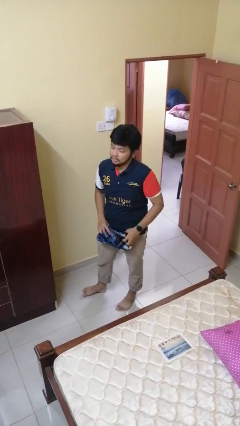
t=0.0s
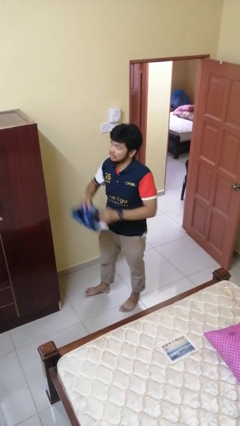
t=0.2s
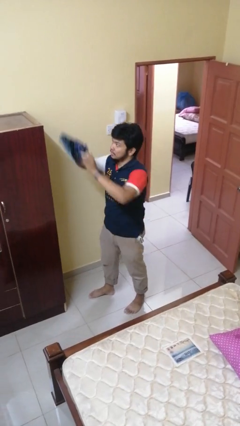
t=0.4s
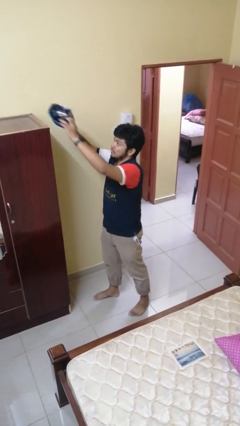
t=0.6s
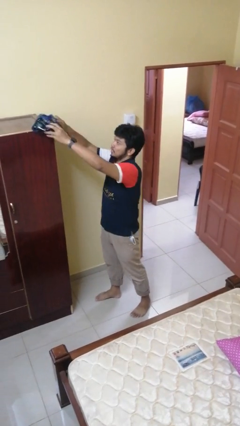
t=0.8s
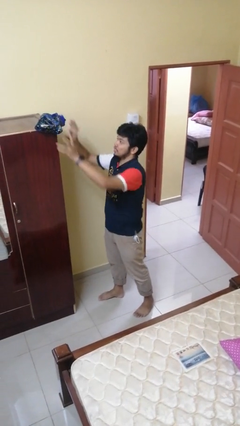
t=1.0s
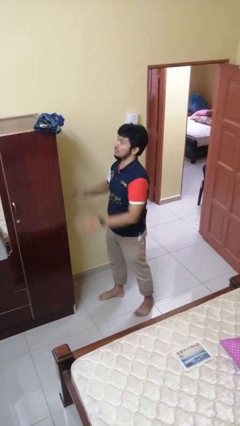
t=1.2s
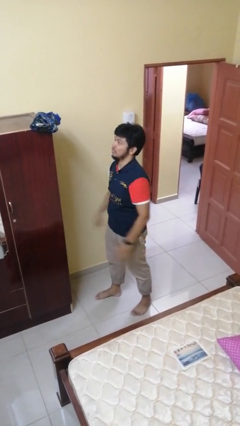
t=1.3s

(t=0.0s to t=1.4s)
person puts down object on countertop

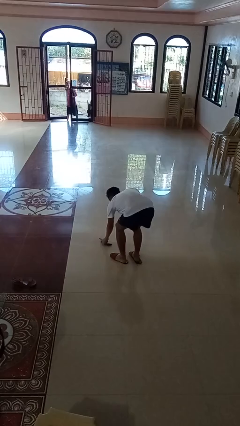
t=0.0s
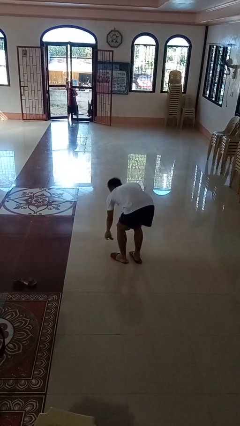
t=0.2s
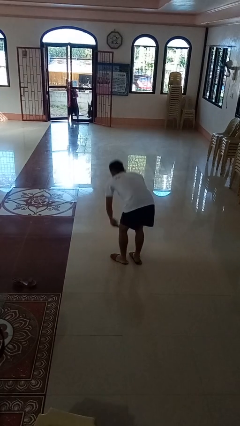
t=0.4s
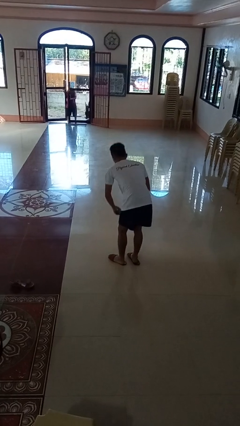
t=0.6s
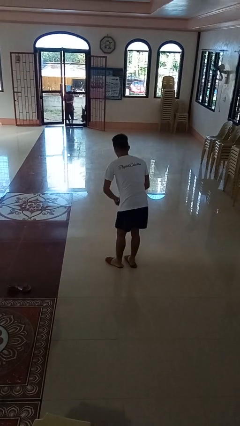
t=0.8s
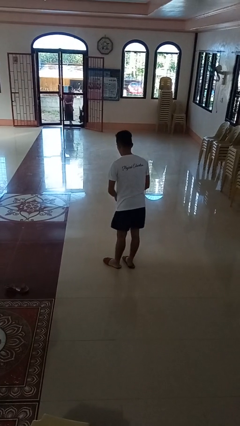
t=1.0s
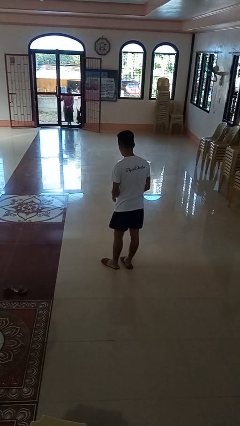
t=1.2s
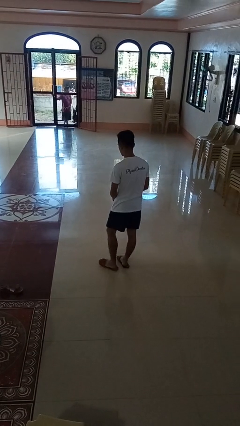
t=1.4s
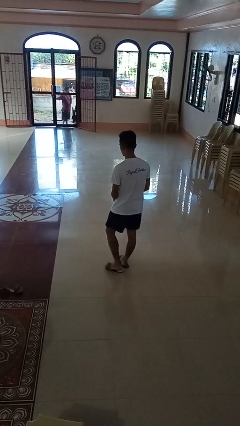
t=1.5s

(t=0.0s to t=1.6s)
person picks up object from floor

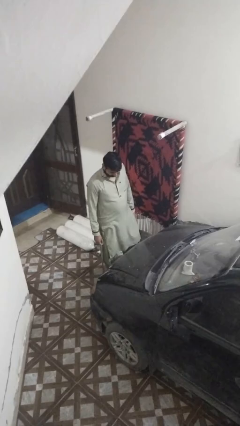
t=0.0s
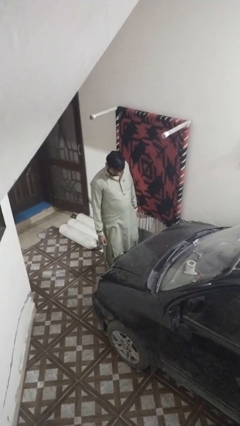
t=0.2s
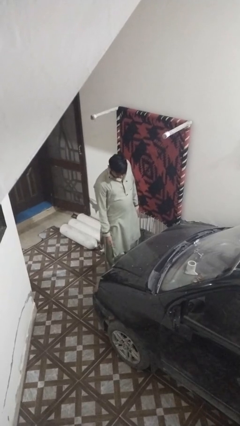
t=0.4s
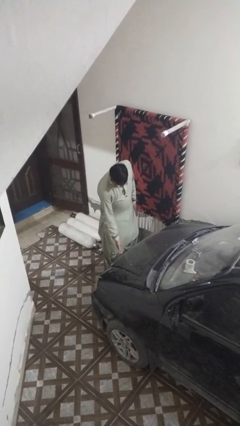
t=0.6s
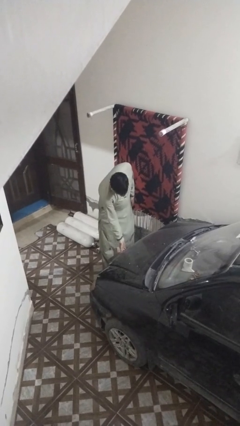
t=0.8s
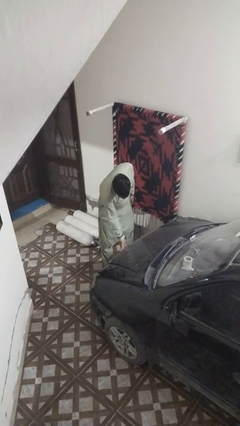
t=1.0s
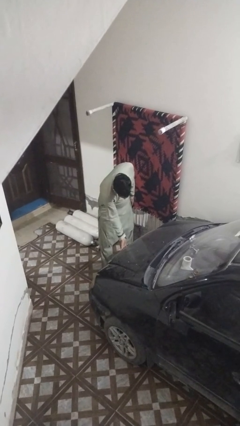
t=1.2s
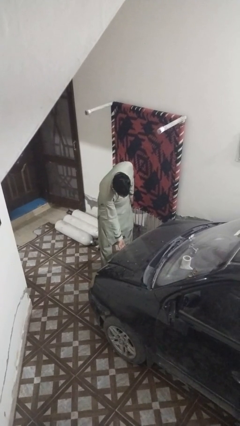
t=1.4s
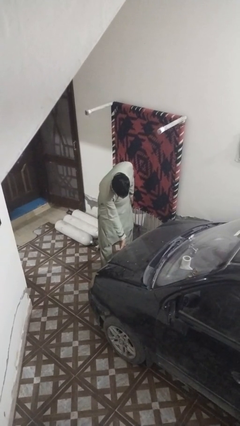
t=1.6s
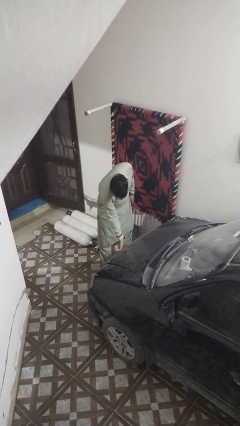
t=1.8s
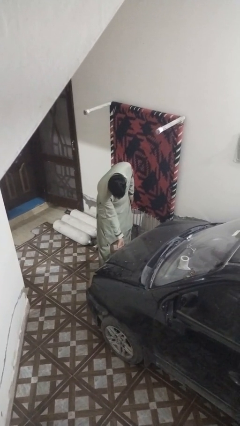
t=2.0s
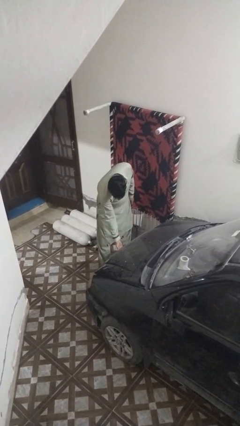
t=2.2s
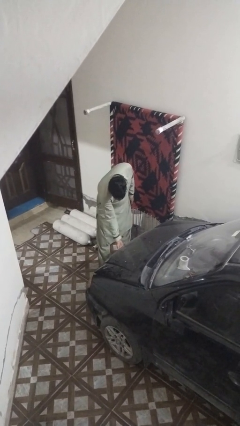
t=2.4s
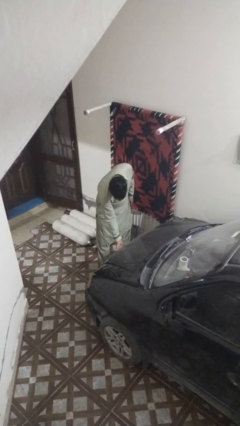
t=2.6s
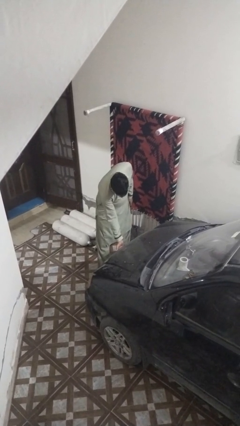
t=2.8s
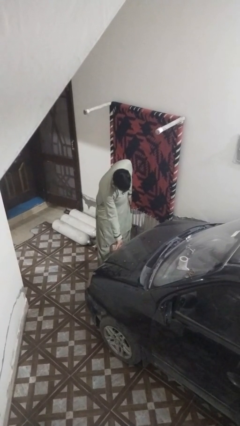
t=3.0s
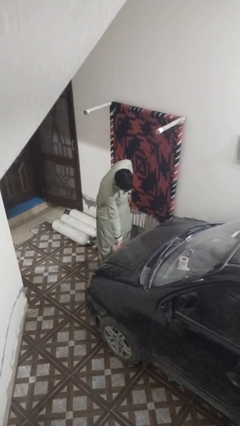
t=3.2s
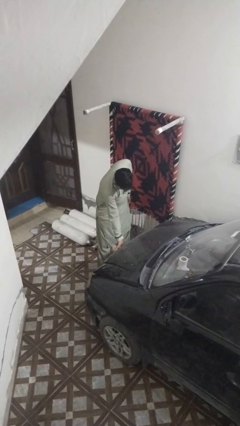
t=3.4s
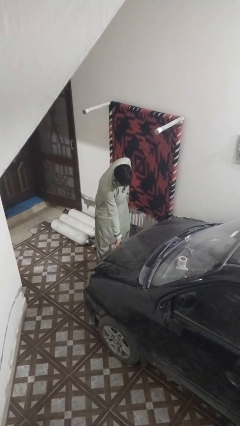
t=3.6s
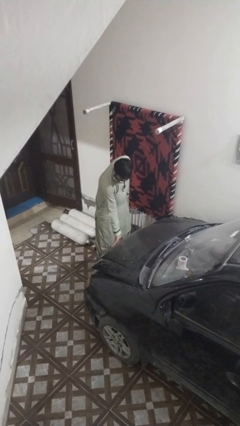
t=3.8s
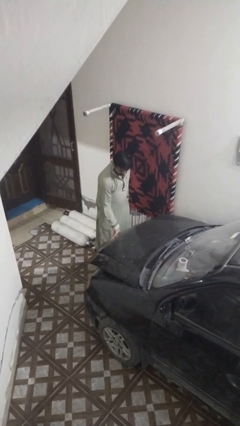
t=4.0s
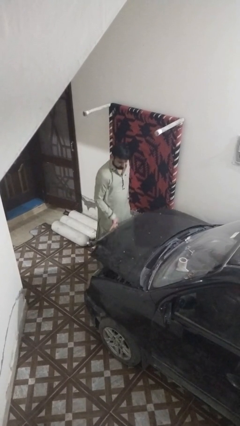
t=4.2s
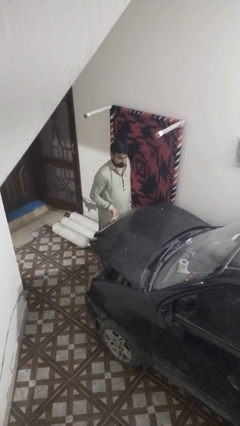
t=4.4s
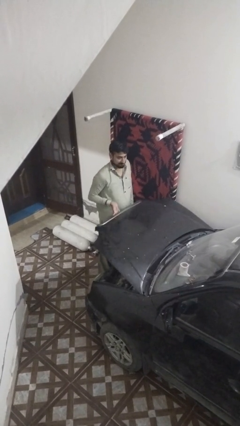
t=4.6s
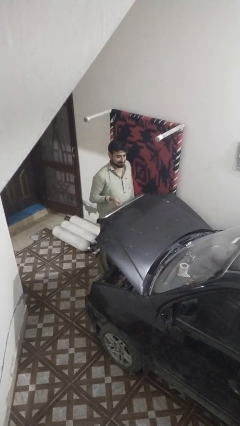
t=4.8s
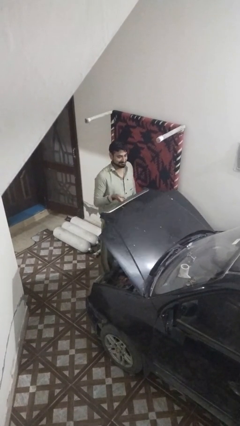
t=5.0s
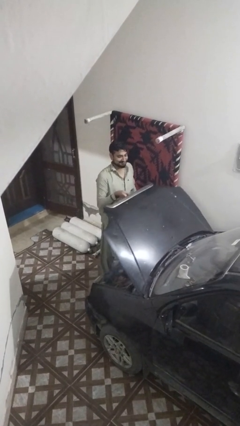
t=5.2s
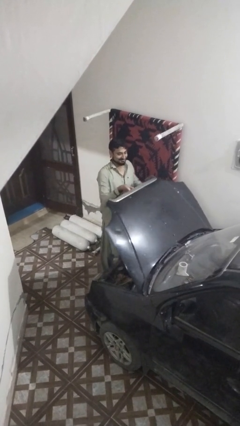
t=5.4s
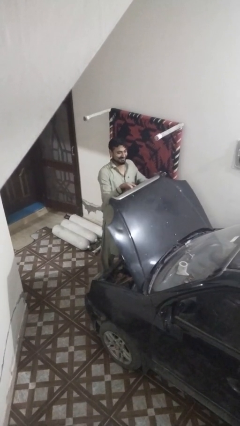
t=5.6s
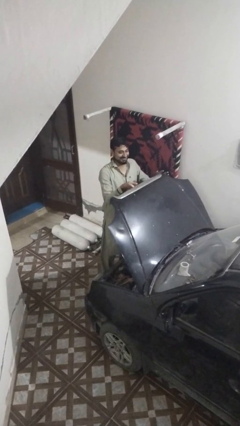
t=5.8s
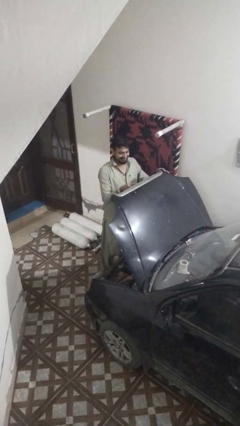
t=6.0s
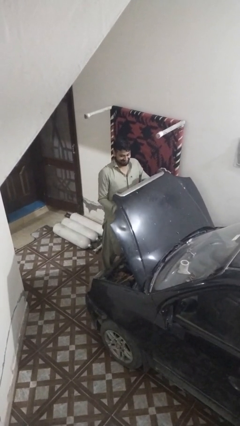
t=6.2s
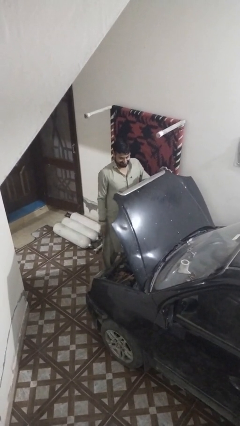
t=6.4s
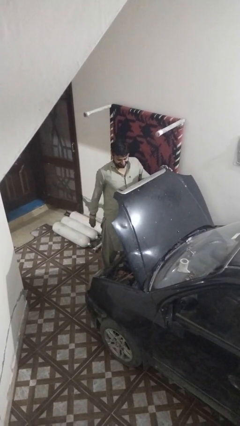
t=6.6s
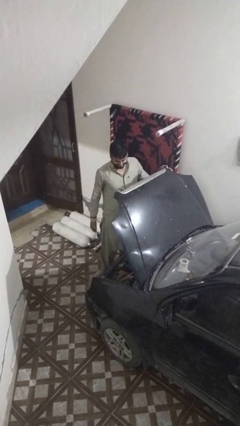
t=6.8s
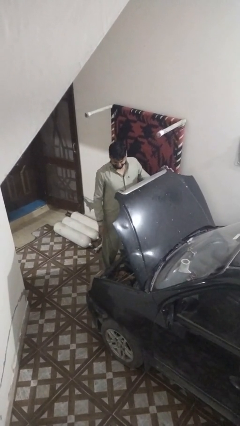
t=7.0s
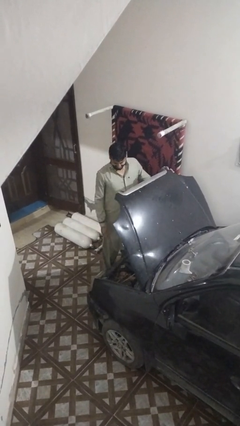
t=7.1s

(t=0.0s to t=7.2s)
person opens car hood

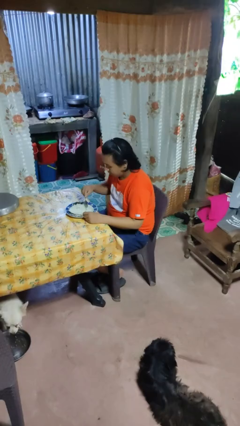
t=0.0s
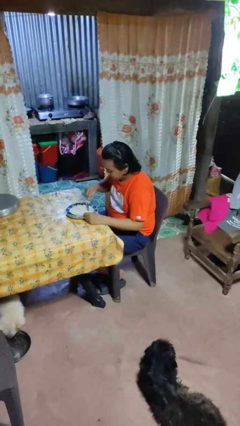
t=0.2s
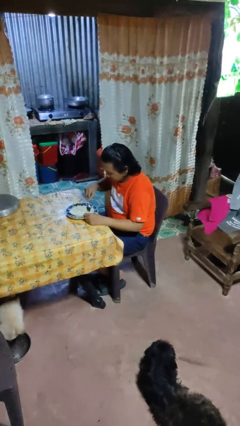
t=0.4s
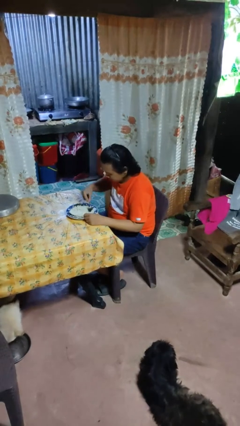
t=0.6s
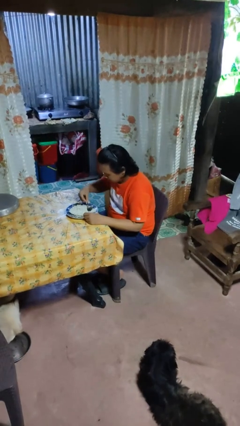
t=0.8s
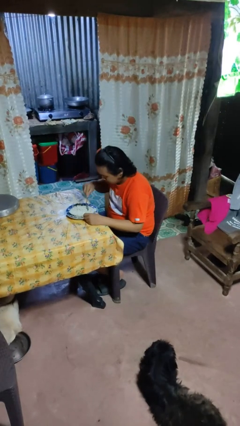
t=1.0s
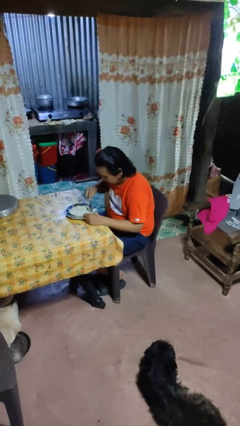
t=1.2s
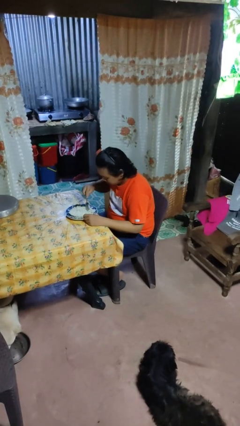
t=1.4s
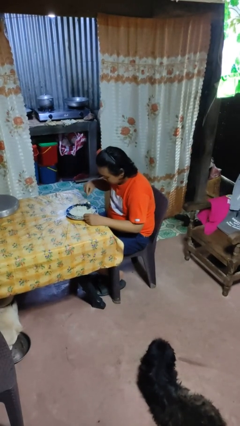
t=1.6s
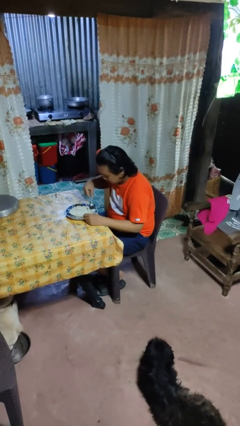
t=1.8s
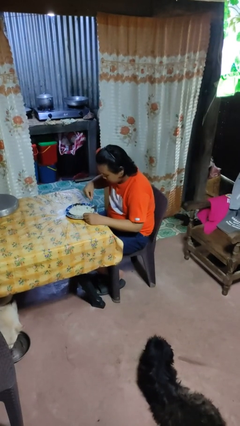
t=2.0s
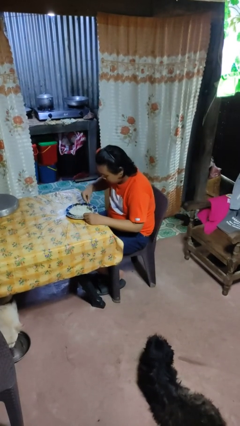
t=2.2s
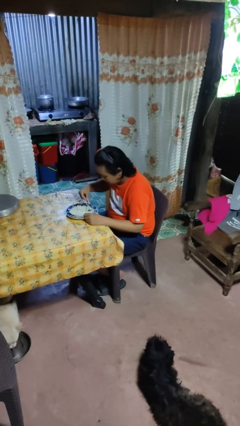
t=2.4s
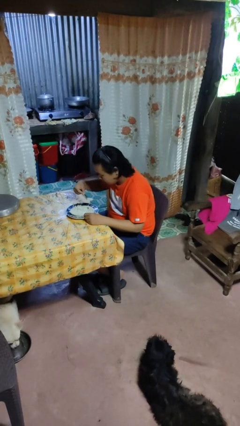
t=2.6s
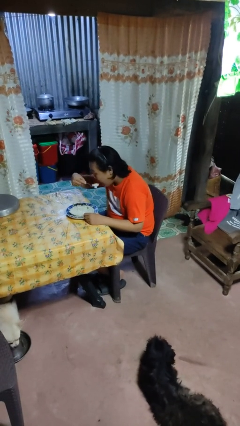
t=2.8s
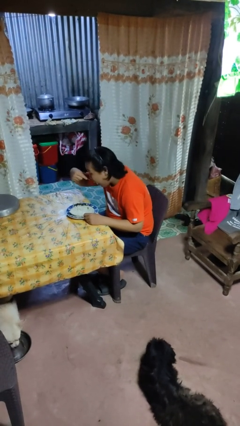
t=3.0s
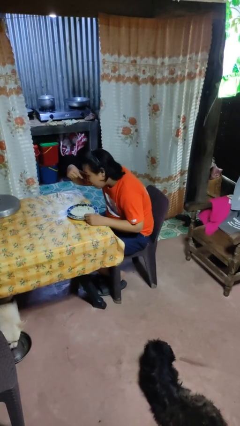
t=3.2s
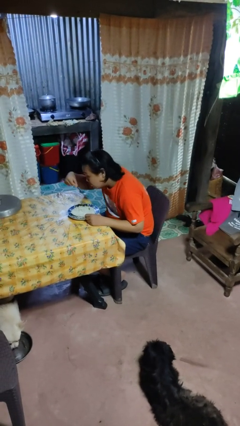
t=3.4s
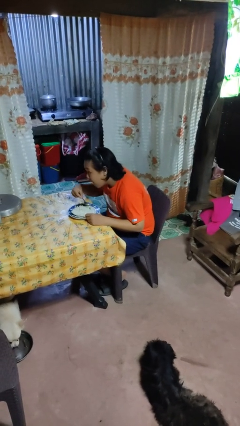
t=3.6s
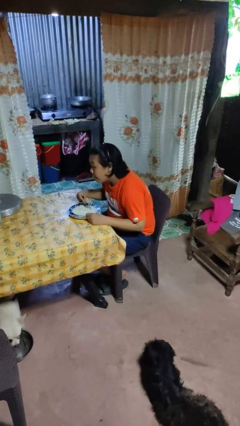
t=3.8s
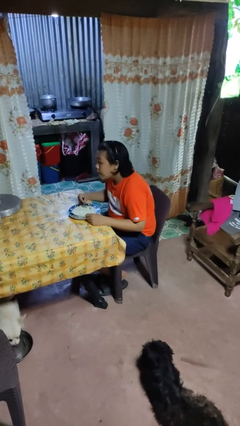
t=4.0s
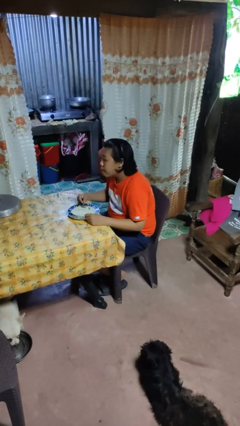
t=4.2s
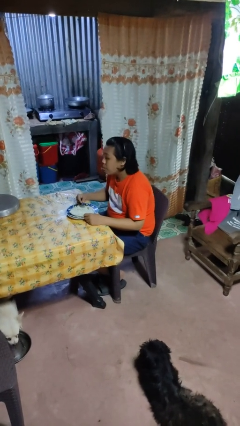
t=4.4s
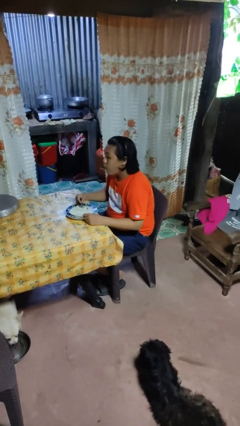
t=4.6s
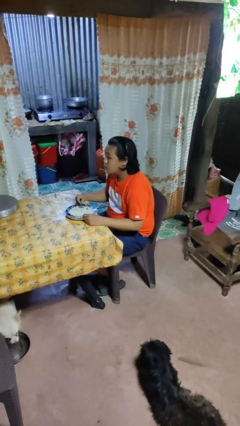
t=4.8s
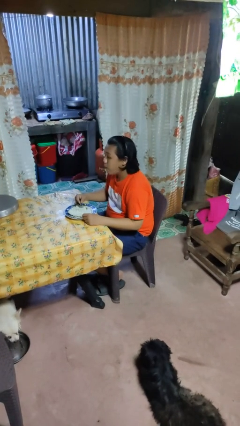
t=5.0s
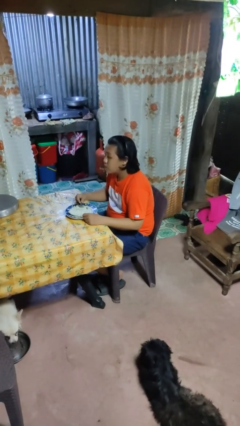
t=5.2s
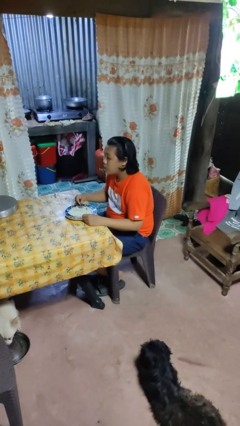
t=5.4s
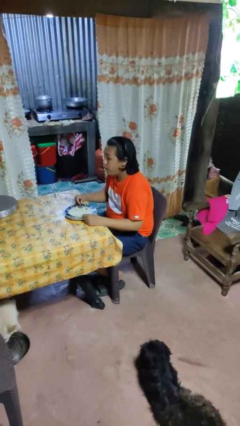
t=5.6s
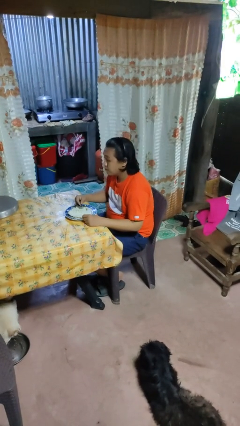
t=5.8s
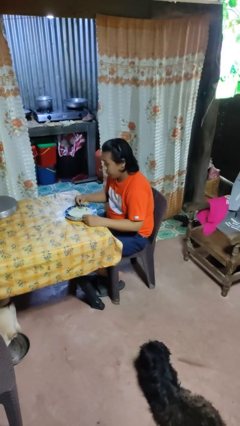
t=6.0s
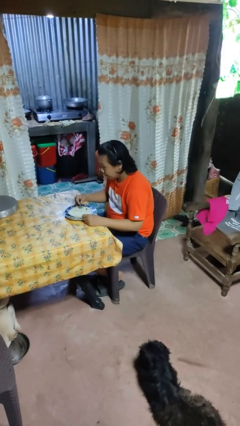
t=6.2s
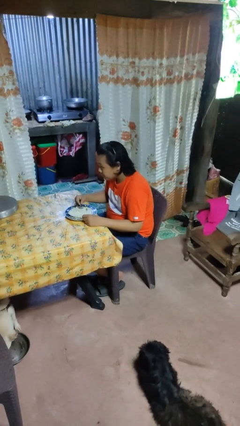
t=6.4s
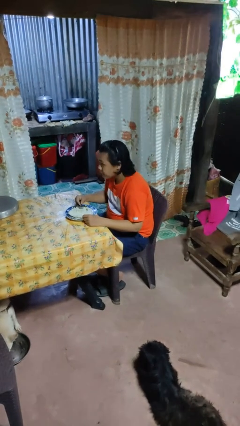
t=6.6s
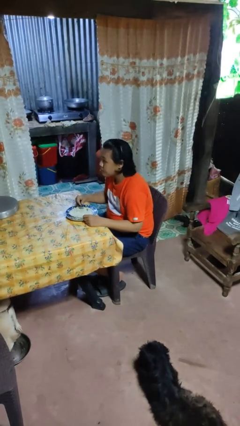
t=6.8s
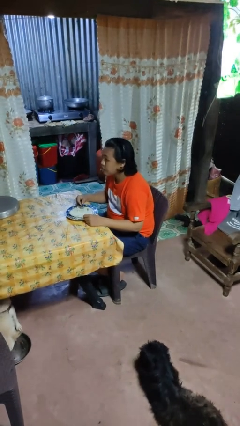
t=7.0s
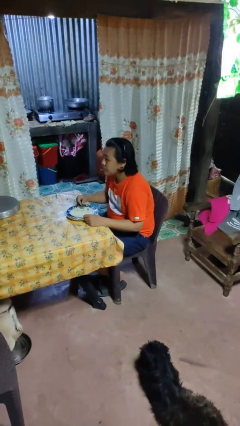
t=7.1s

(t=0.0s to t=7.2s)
person eats with utensil

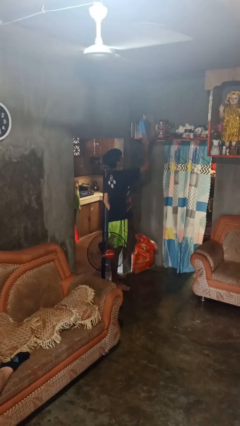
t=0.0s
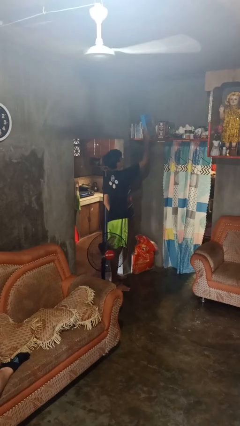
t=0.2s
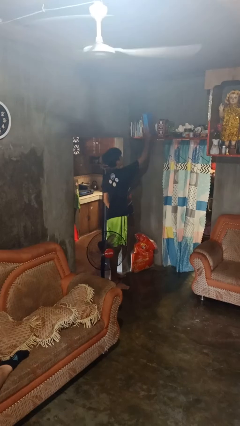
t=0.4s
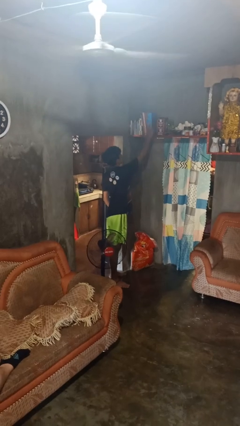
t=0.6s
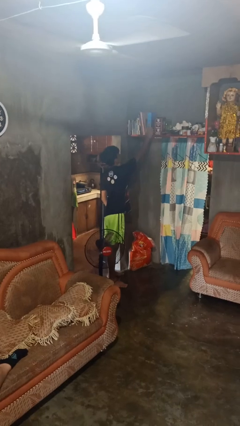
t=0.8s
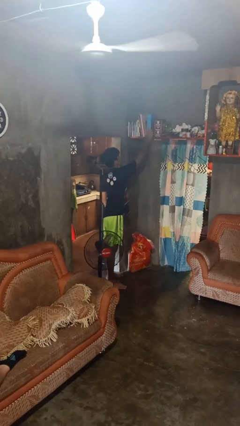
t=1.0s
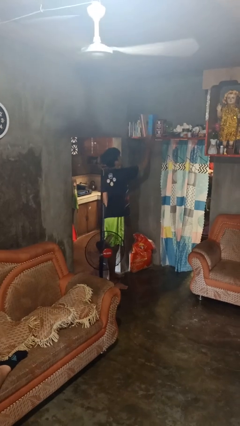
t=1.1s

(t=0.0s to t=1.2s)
person puts down object on shelf
